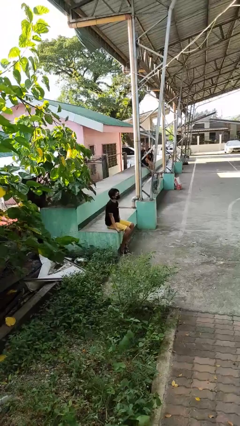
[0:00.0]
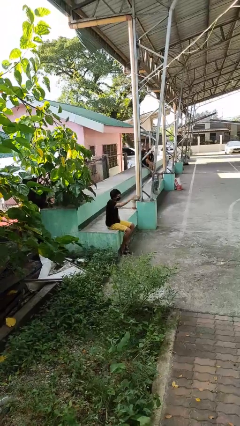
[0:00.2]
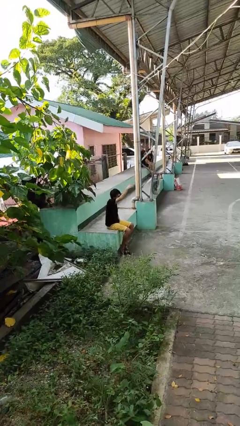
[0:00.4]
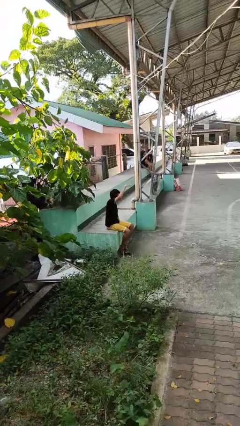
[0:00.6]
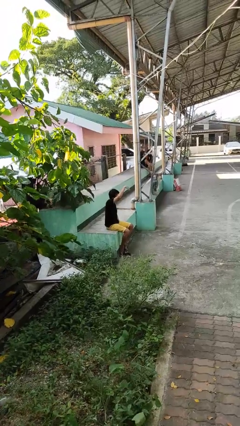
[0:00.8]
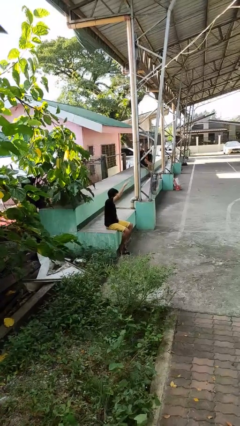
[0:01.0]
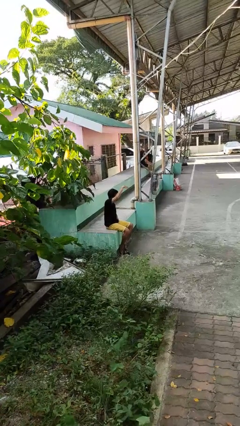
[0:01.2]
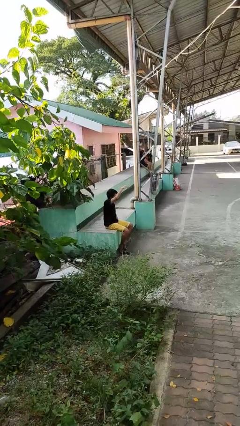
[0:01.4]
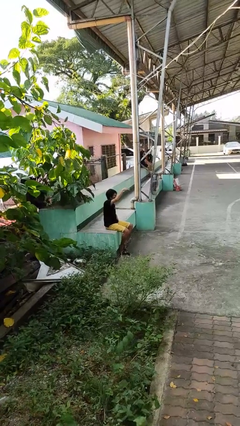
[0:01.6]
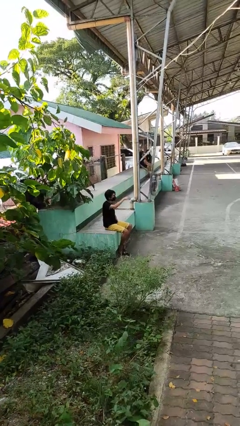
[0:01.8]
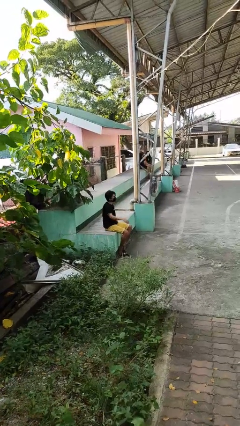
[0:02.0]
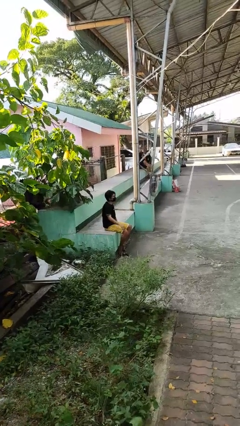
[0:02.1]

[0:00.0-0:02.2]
person gestures come here

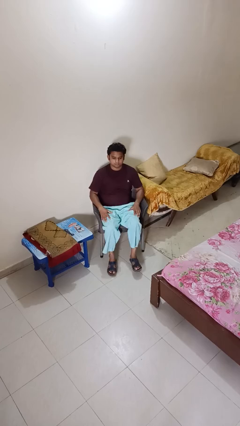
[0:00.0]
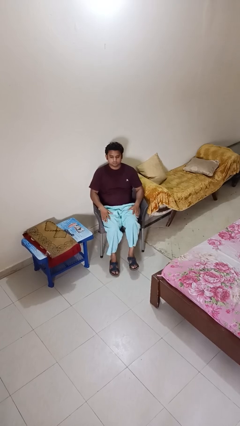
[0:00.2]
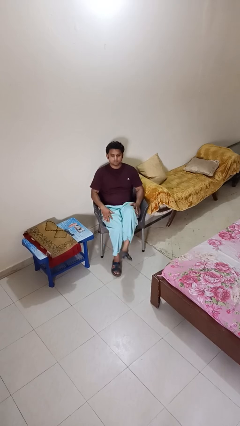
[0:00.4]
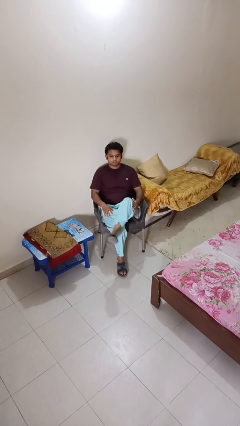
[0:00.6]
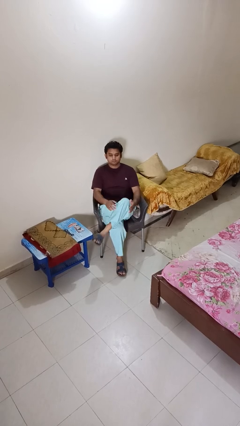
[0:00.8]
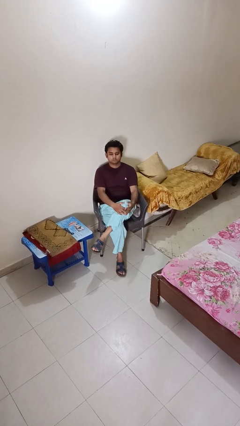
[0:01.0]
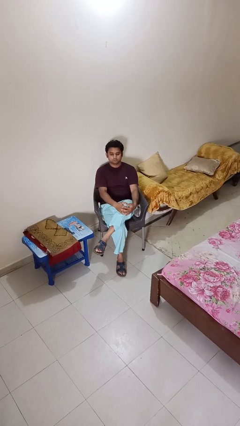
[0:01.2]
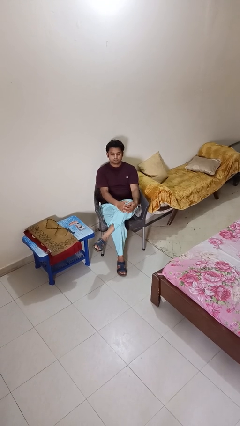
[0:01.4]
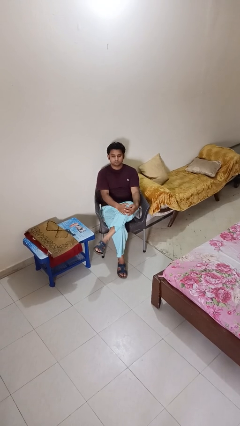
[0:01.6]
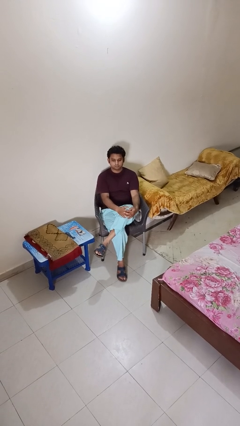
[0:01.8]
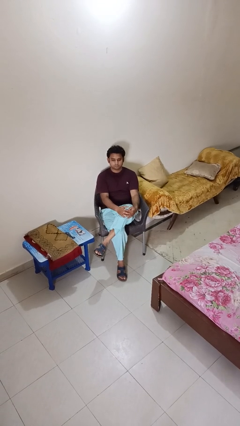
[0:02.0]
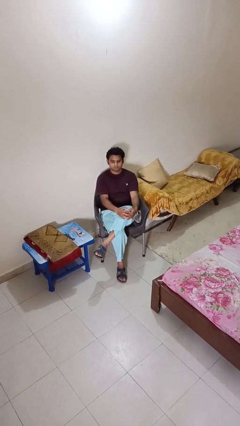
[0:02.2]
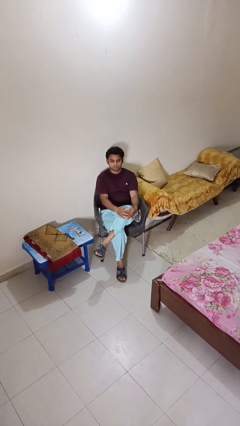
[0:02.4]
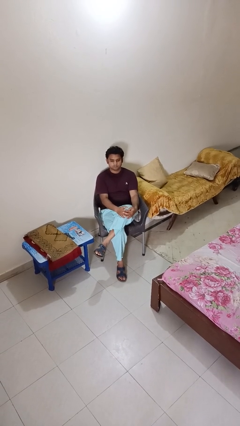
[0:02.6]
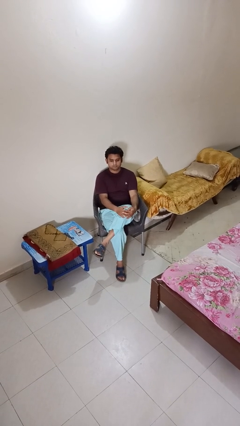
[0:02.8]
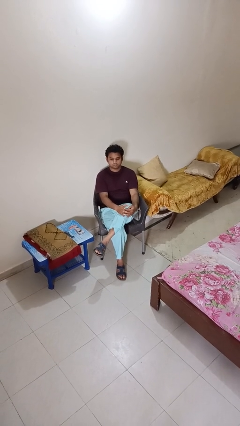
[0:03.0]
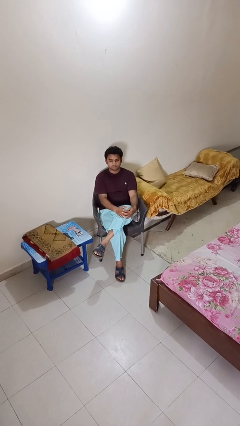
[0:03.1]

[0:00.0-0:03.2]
person crosses legs

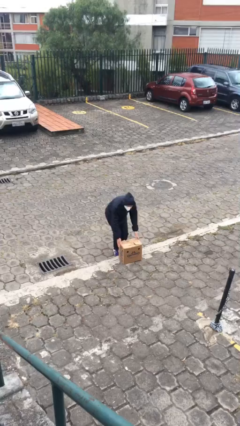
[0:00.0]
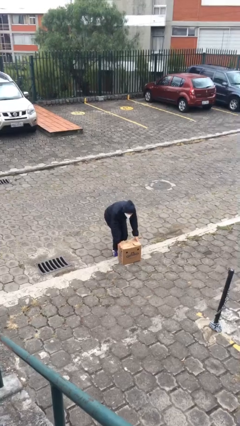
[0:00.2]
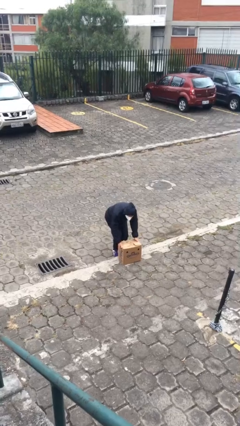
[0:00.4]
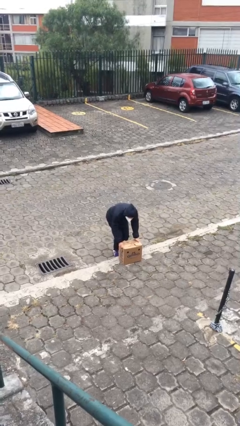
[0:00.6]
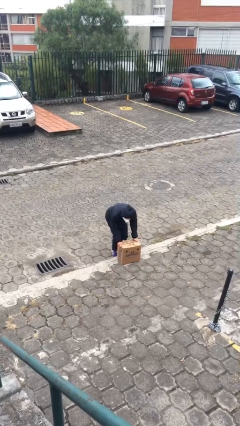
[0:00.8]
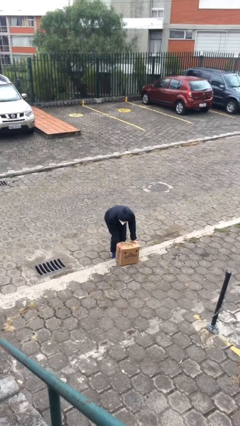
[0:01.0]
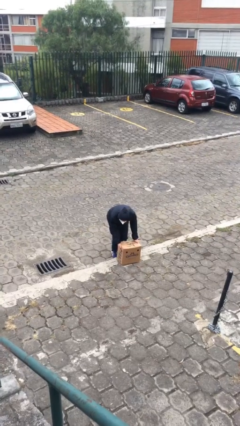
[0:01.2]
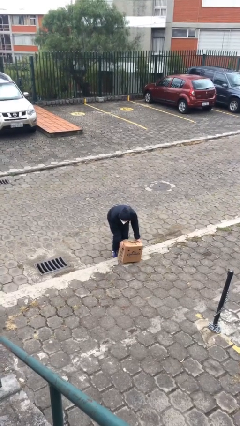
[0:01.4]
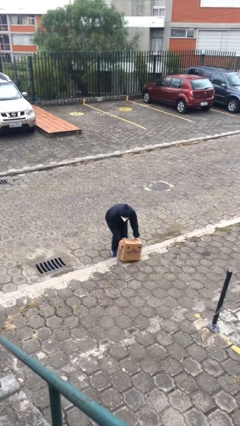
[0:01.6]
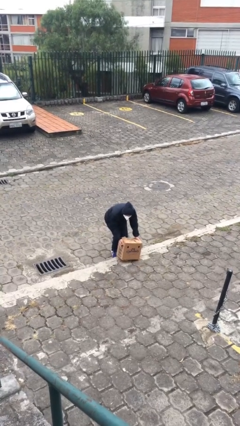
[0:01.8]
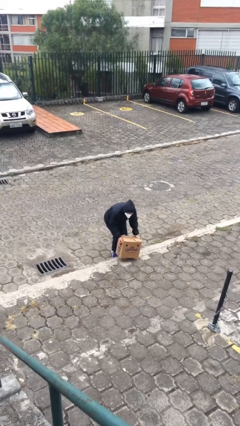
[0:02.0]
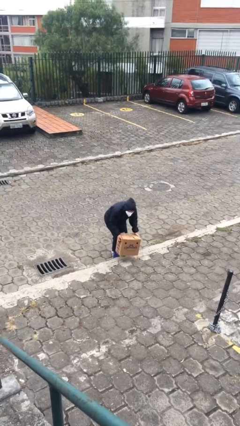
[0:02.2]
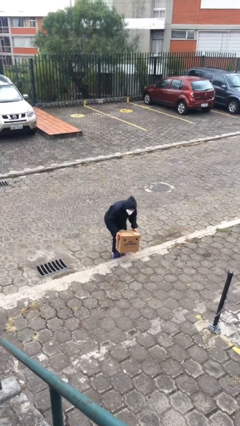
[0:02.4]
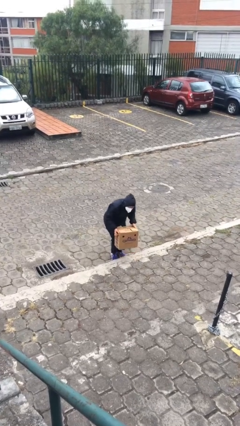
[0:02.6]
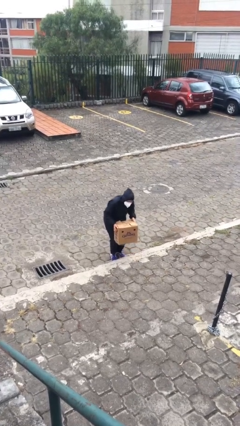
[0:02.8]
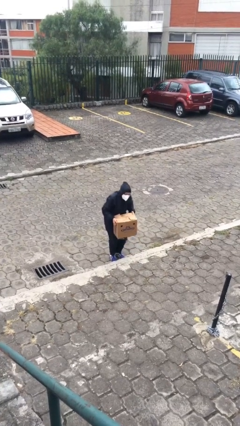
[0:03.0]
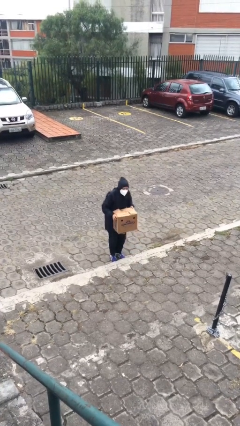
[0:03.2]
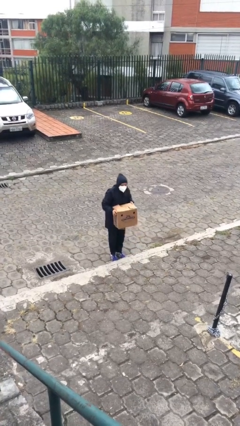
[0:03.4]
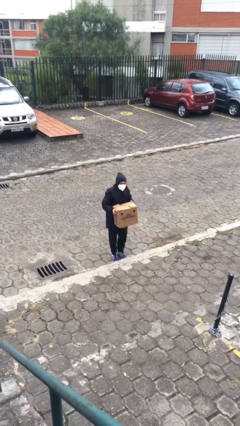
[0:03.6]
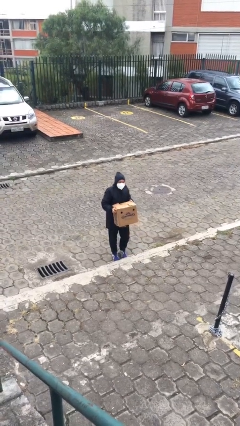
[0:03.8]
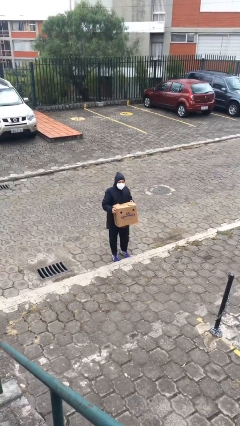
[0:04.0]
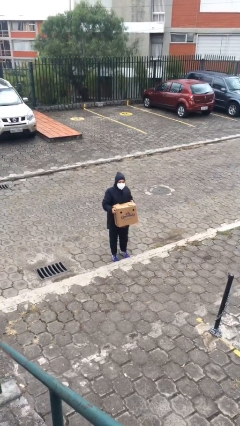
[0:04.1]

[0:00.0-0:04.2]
person picks up object from floor

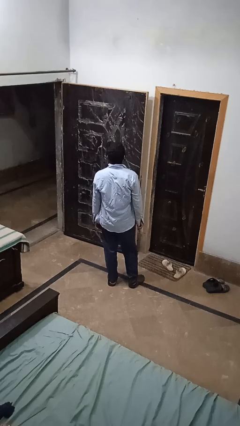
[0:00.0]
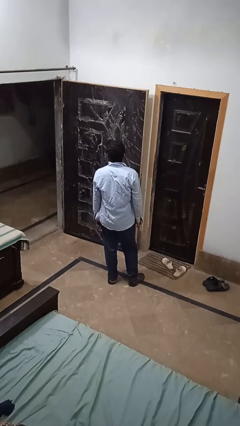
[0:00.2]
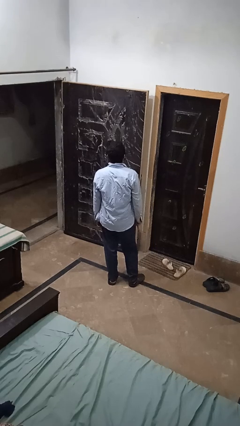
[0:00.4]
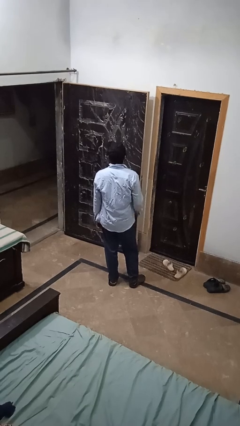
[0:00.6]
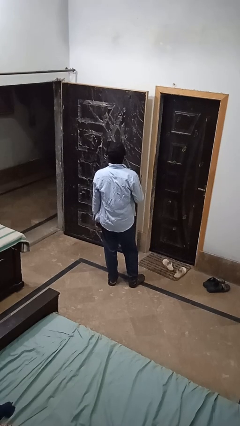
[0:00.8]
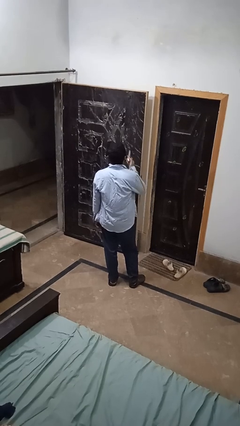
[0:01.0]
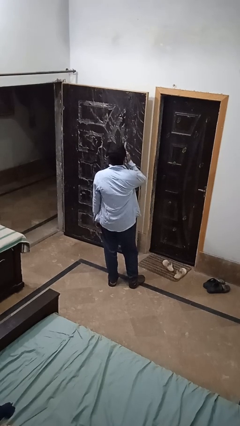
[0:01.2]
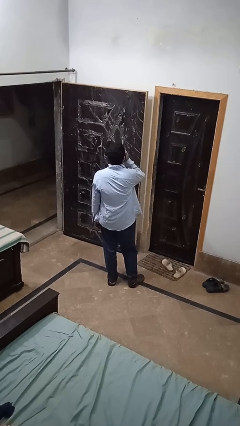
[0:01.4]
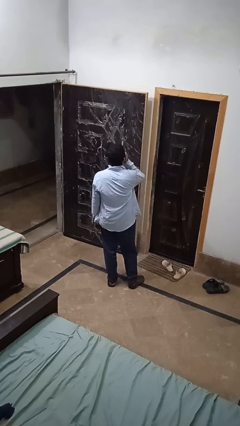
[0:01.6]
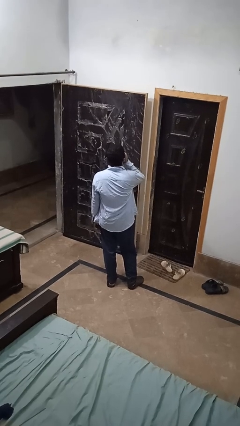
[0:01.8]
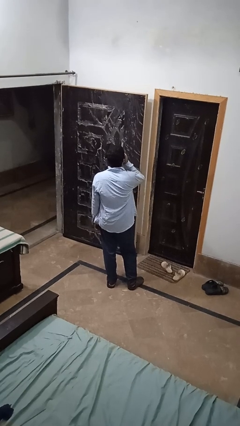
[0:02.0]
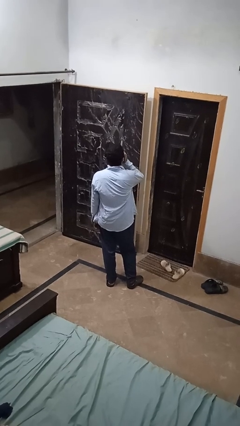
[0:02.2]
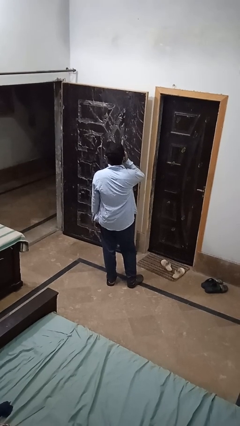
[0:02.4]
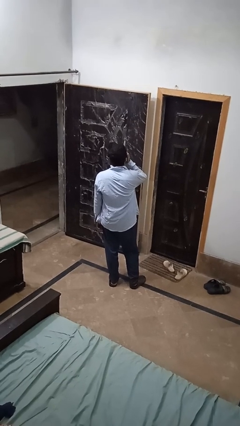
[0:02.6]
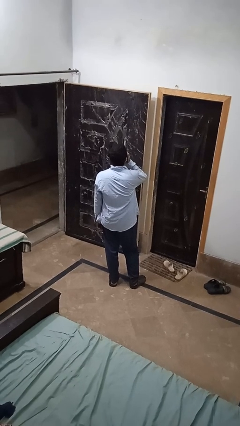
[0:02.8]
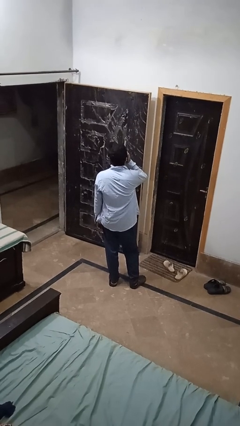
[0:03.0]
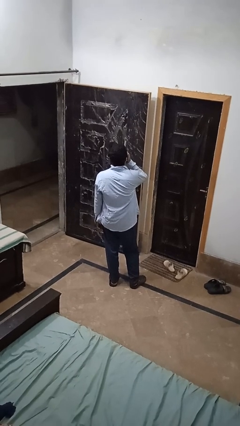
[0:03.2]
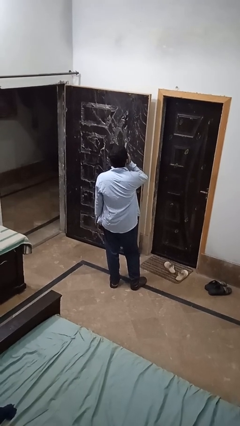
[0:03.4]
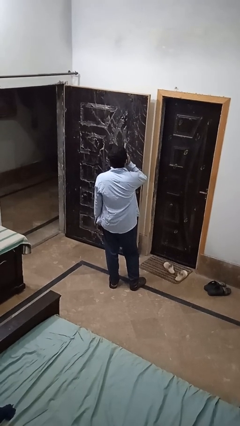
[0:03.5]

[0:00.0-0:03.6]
person vapes

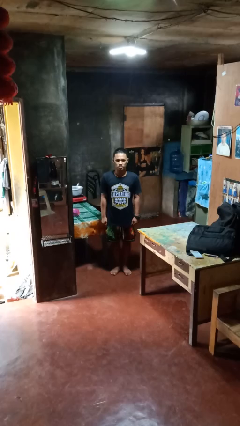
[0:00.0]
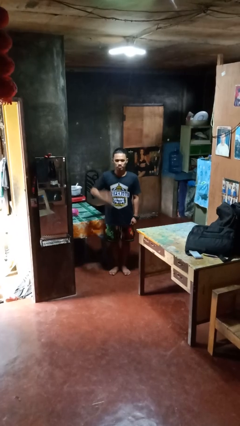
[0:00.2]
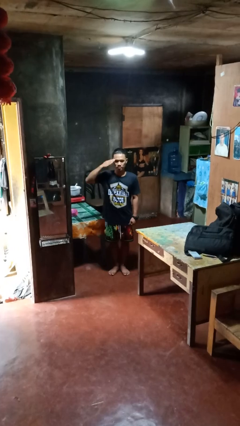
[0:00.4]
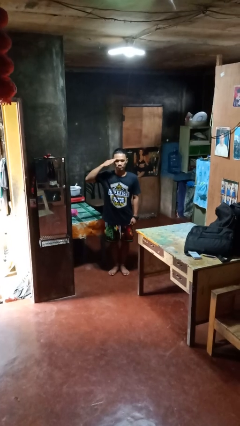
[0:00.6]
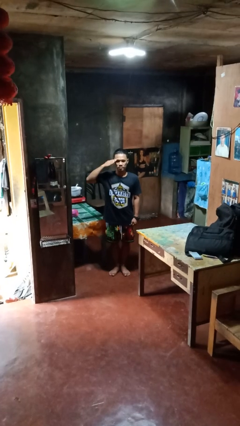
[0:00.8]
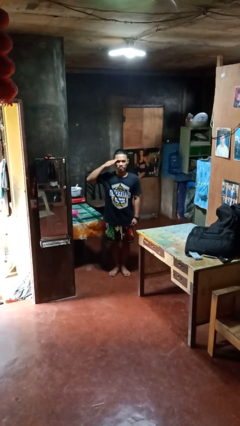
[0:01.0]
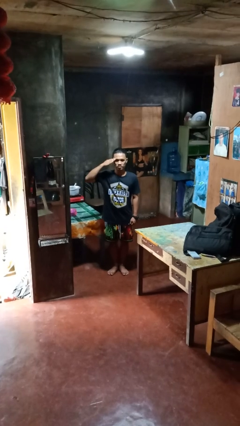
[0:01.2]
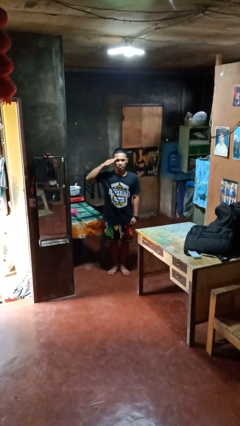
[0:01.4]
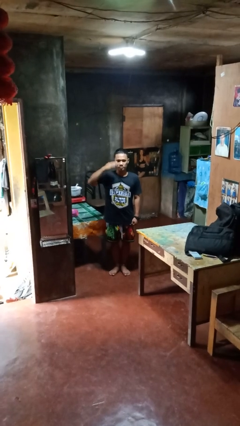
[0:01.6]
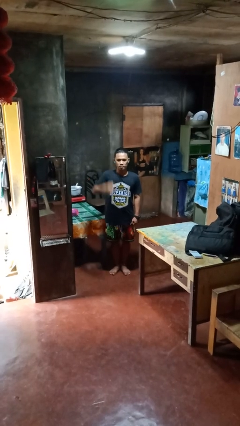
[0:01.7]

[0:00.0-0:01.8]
person salutes

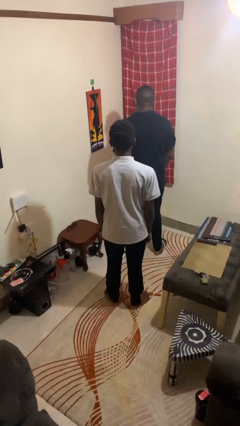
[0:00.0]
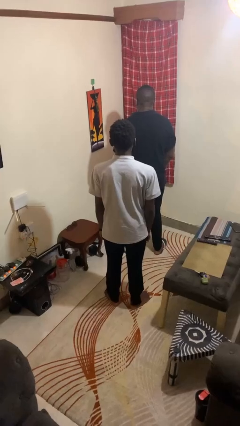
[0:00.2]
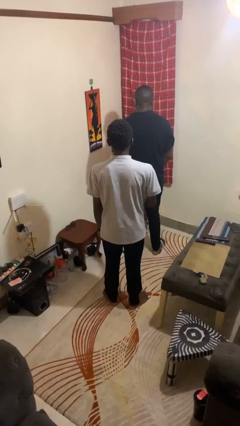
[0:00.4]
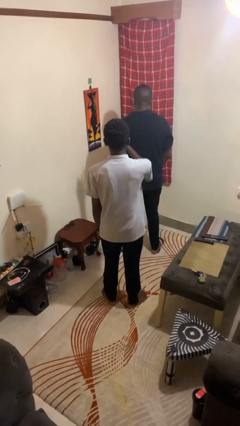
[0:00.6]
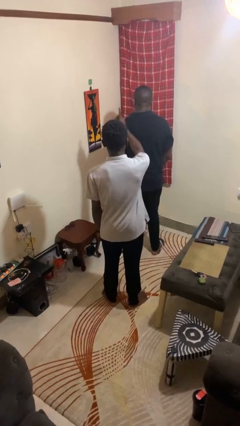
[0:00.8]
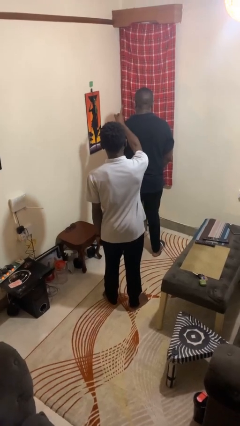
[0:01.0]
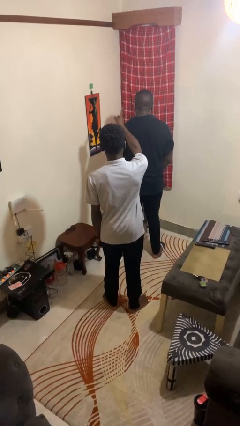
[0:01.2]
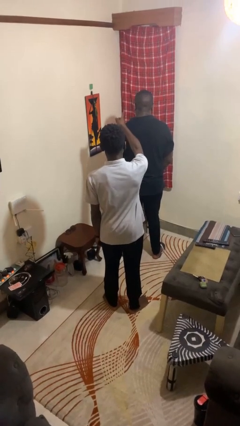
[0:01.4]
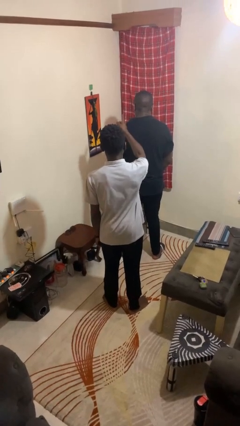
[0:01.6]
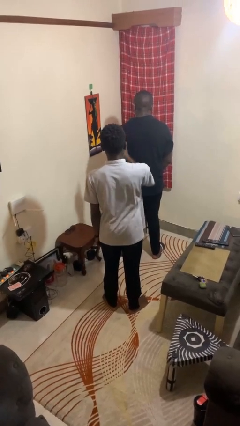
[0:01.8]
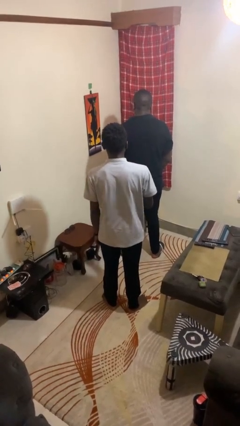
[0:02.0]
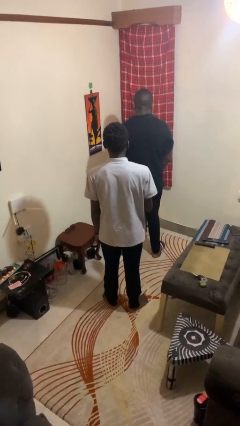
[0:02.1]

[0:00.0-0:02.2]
person points at person

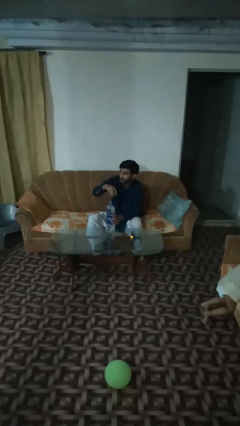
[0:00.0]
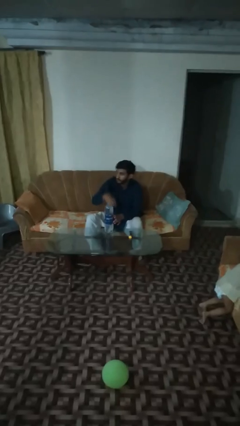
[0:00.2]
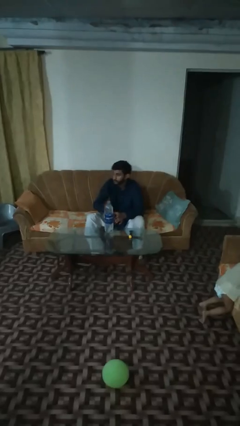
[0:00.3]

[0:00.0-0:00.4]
person unscrews lid from bottle
